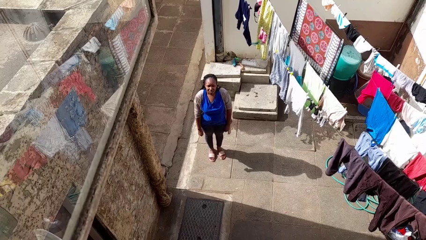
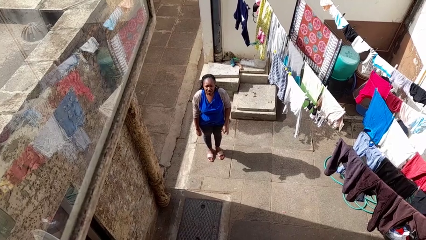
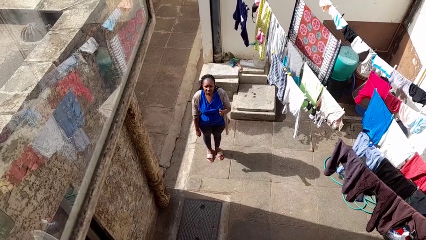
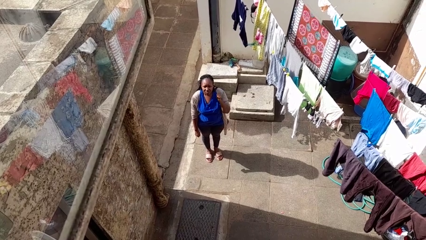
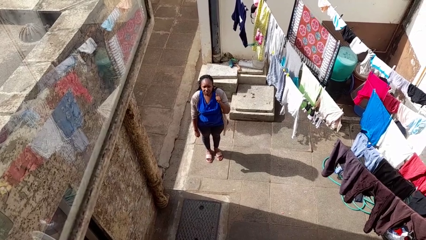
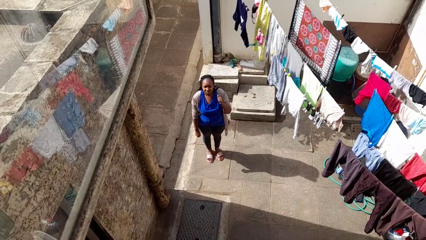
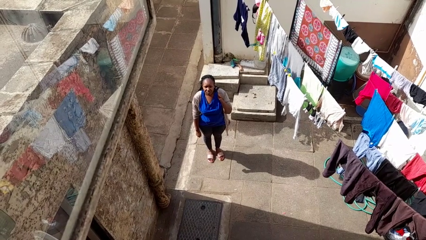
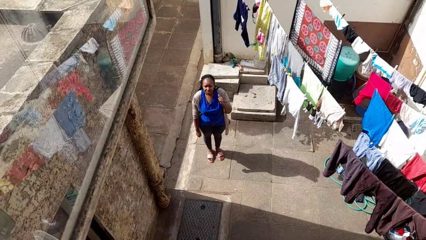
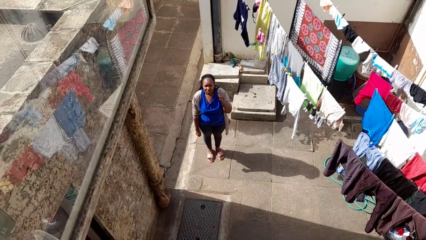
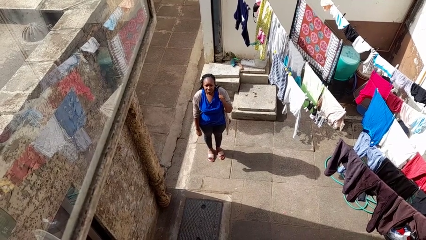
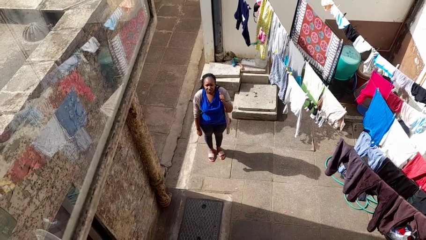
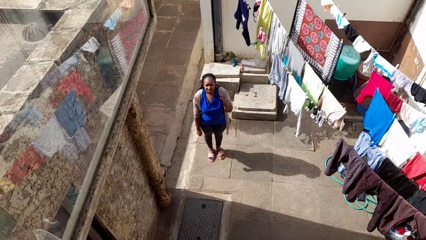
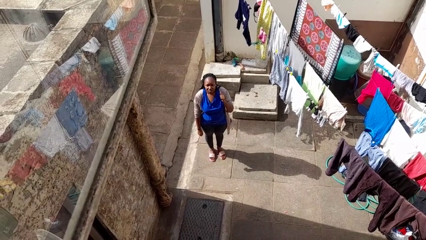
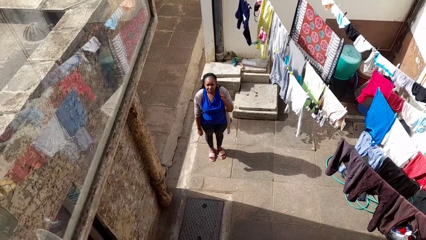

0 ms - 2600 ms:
person gestures behind me

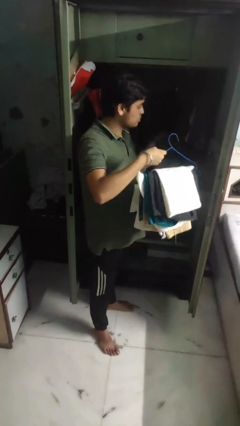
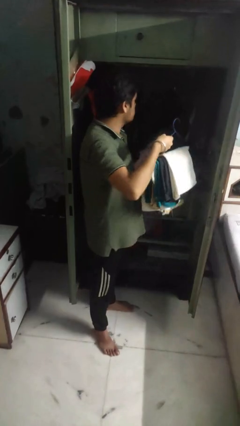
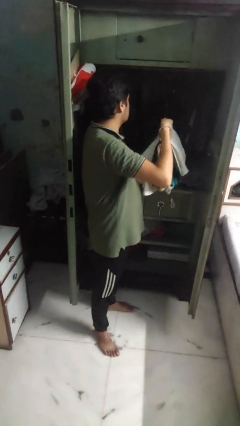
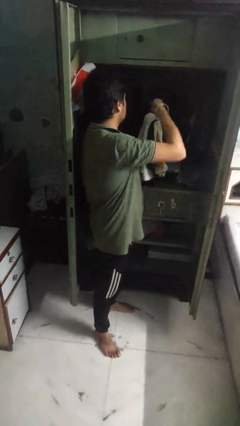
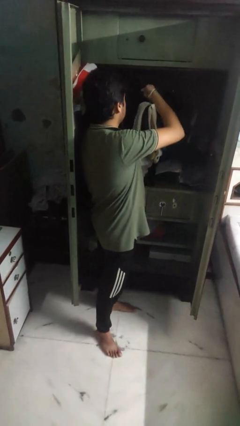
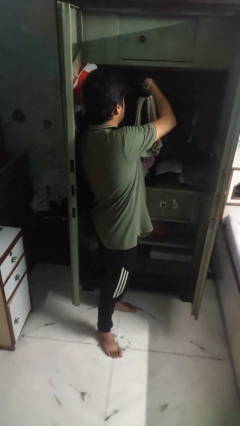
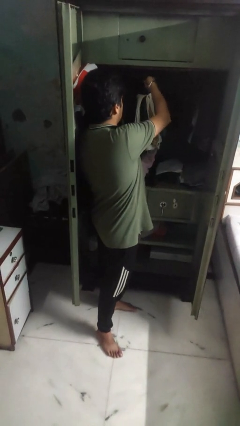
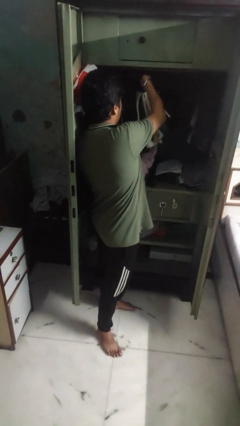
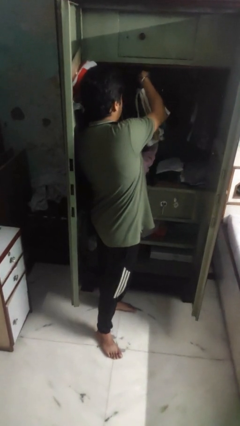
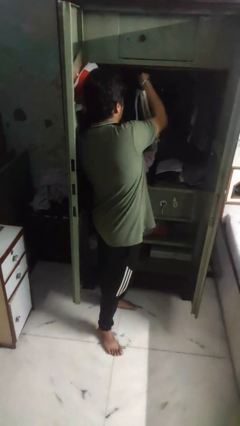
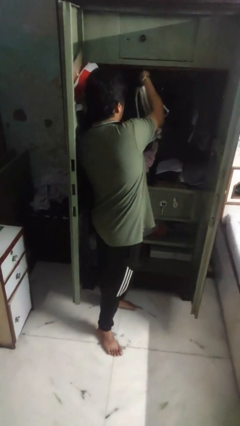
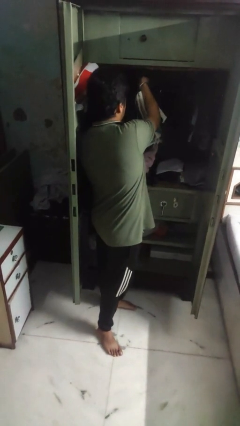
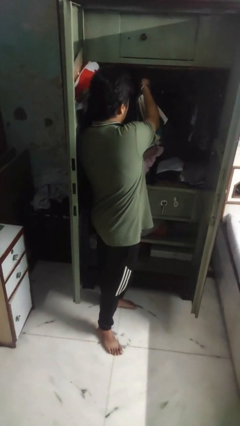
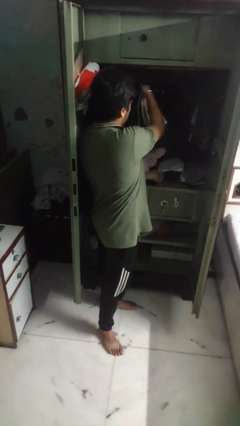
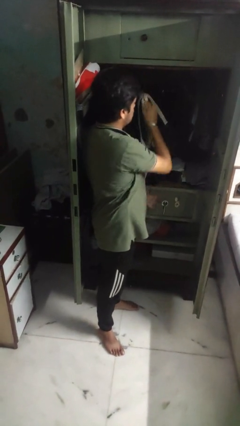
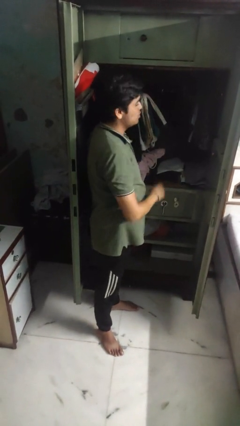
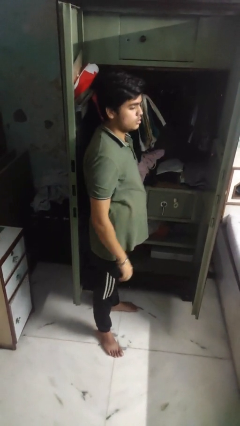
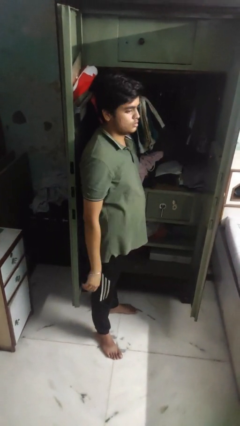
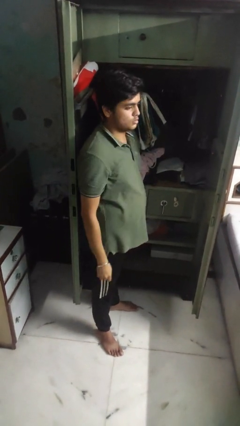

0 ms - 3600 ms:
person puts clothes into closet

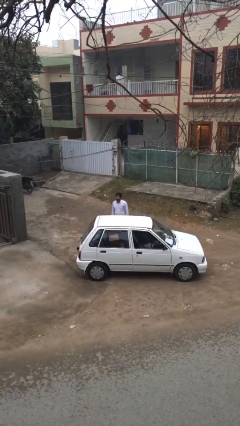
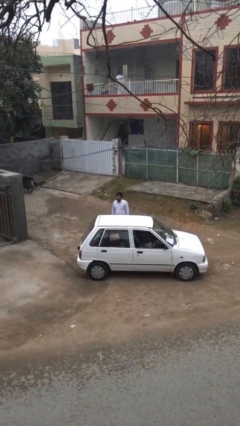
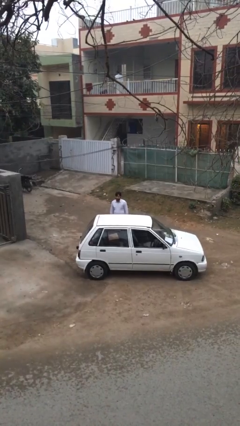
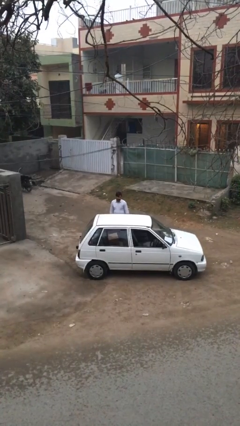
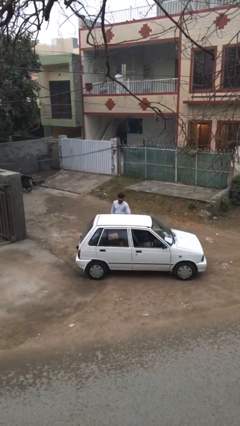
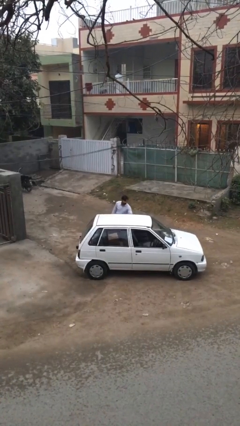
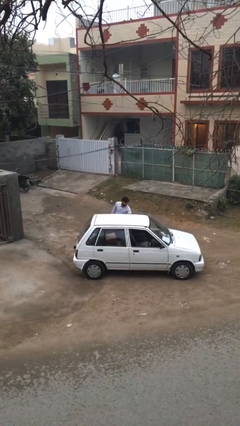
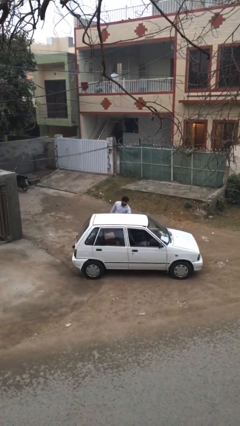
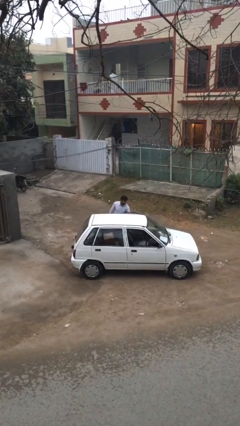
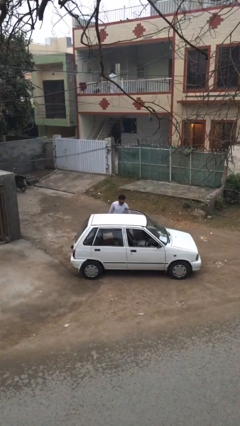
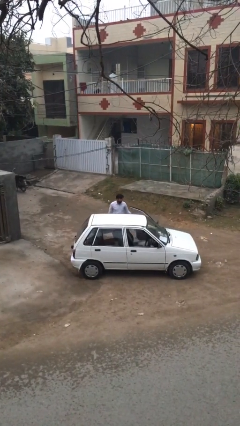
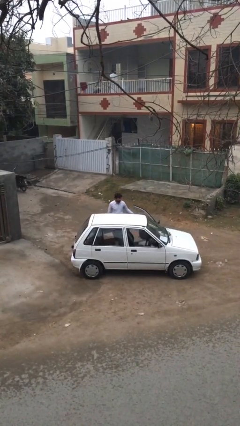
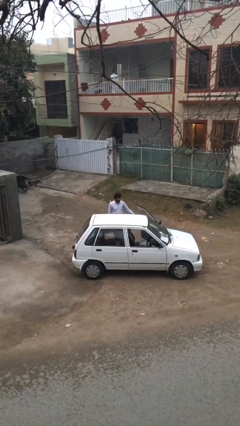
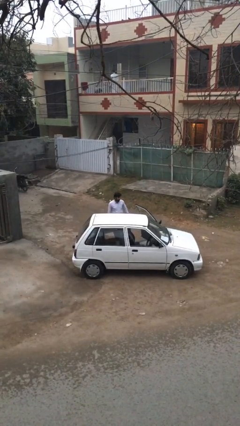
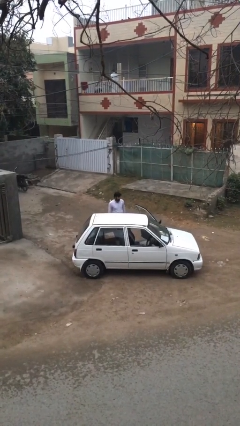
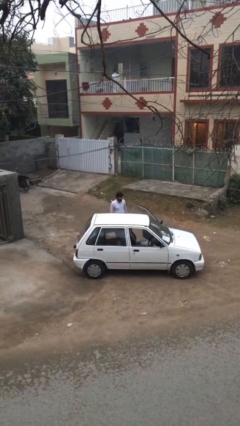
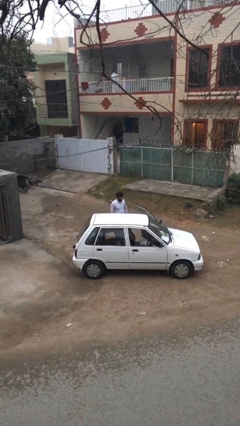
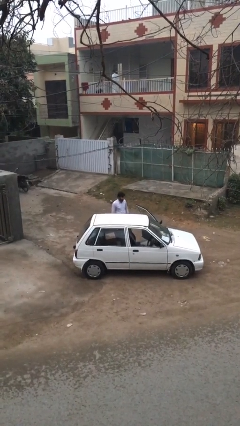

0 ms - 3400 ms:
person opens car door

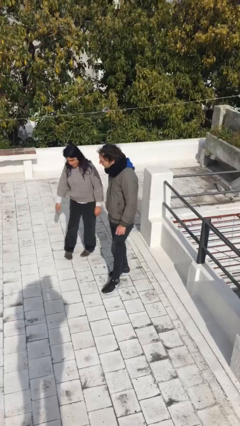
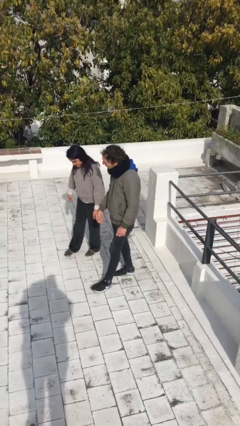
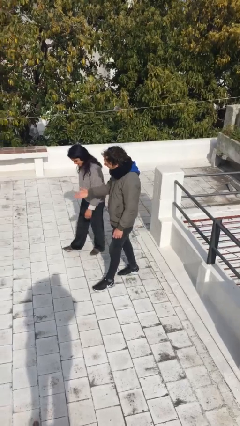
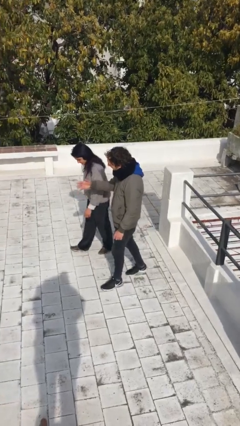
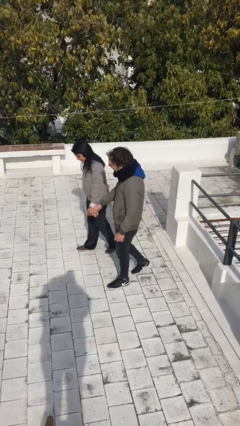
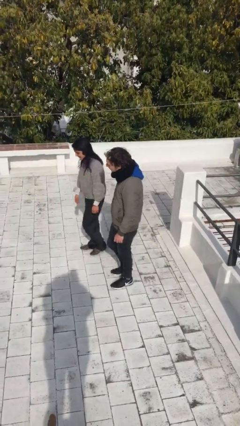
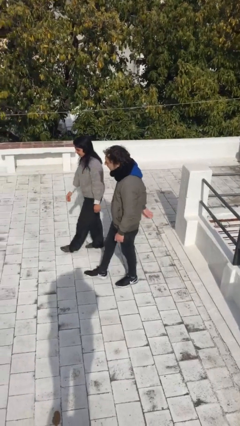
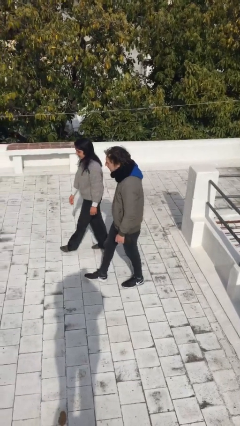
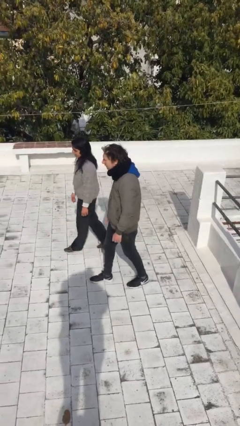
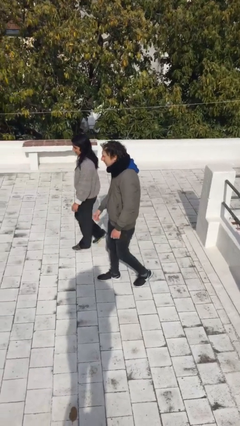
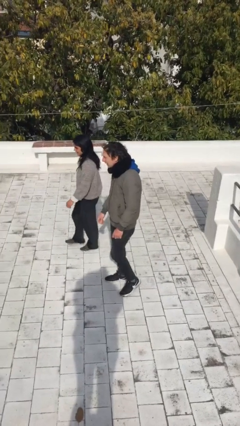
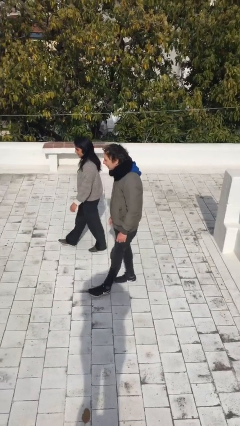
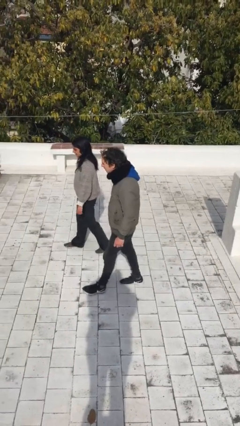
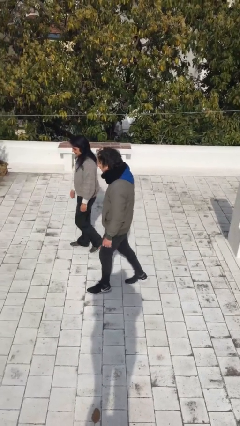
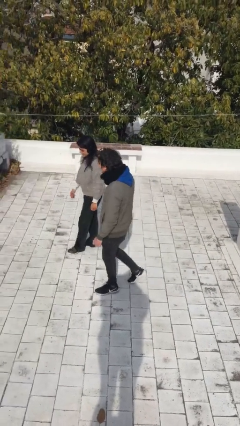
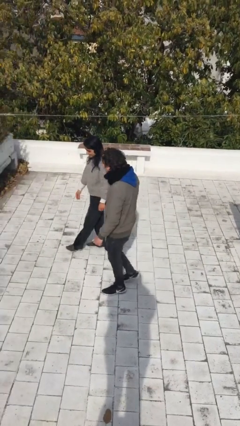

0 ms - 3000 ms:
person talks to person

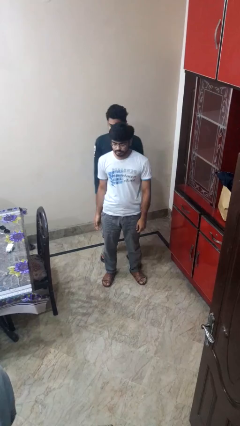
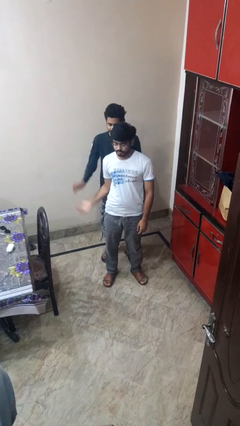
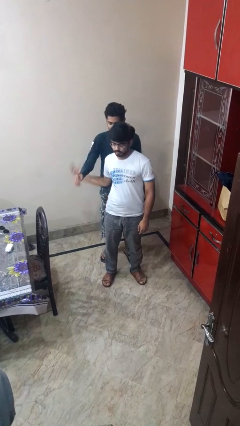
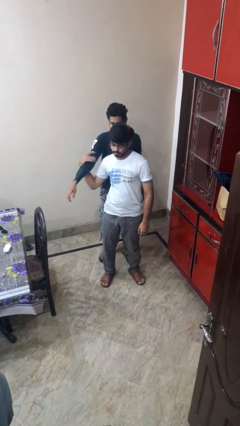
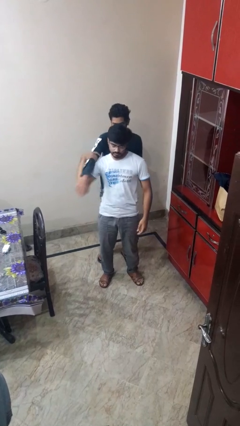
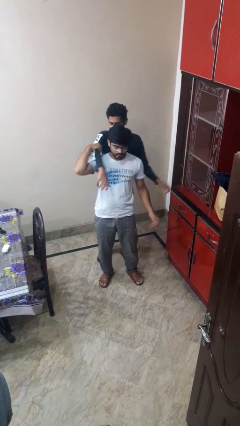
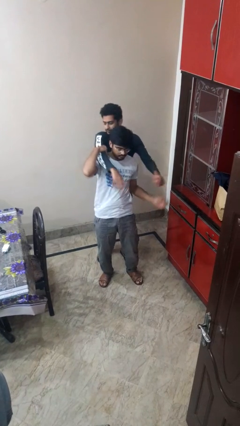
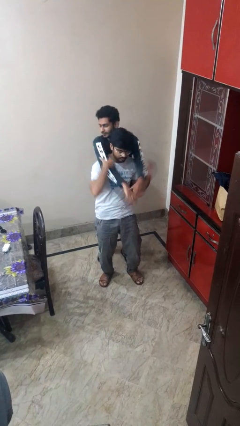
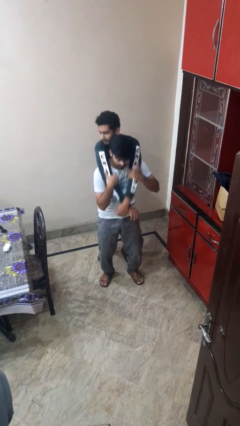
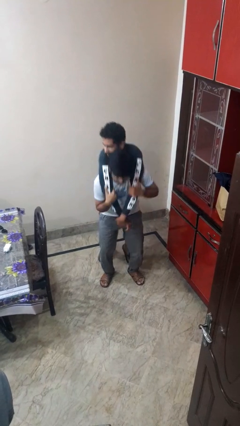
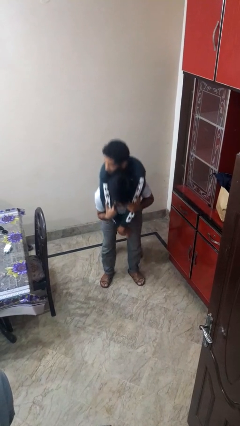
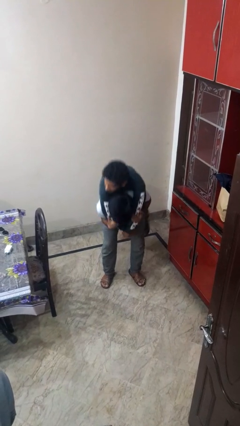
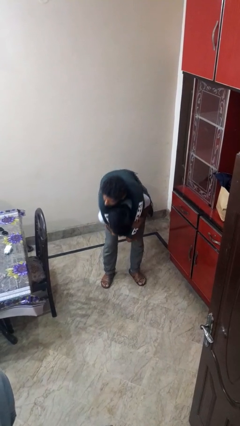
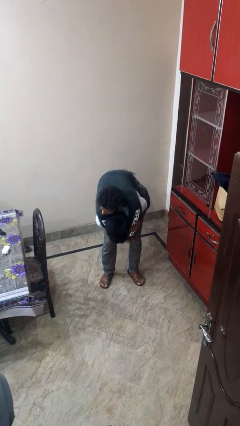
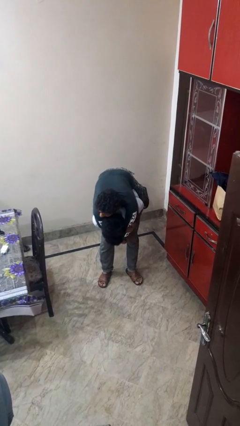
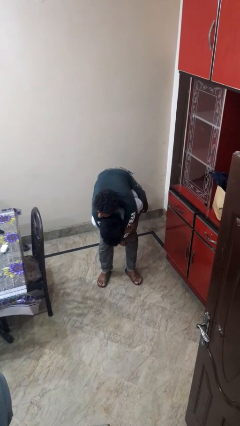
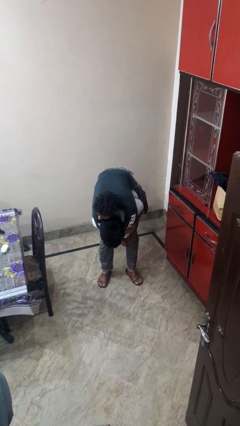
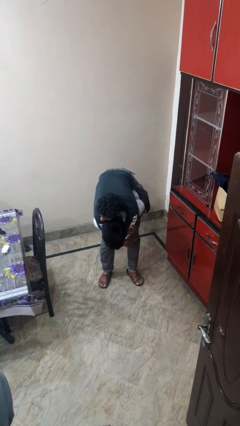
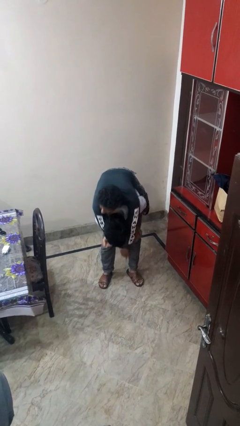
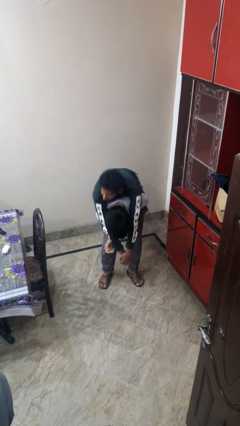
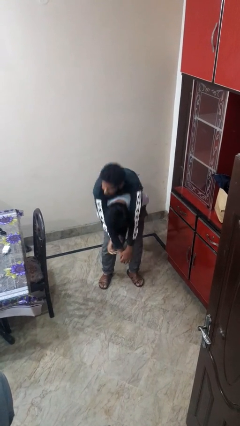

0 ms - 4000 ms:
person carries person over shoulder

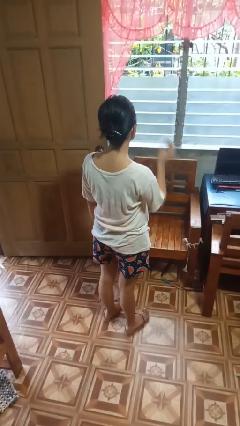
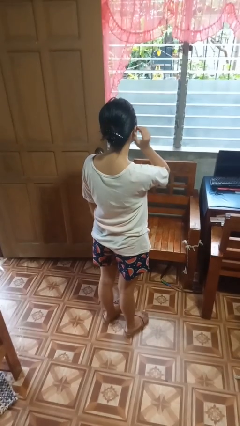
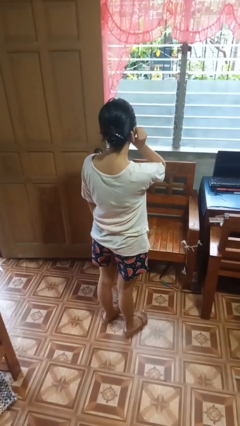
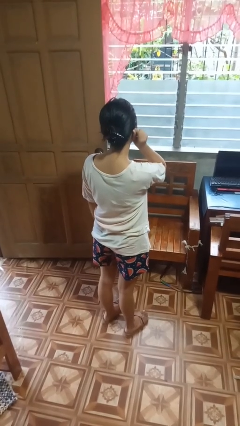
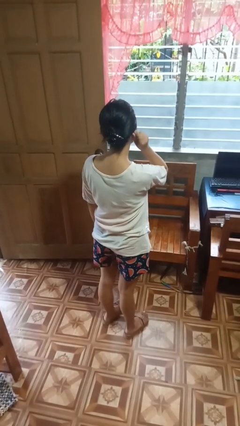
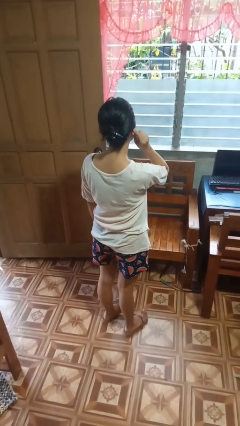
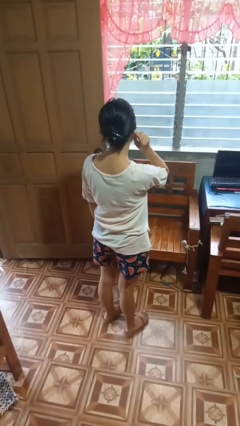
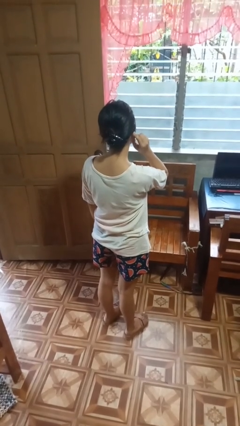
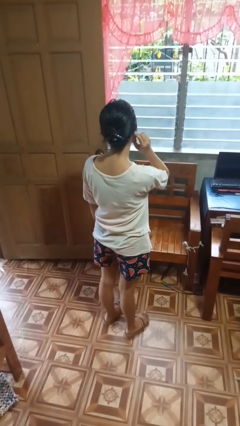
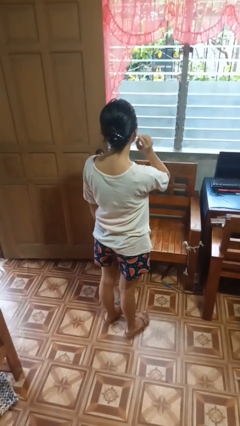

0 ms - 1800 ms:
person touches earlobe
